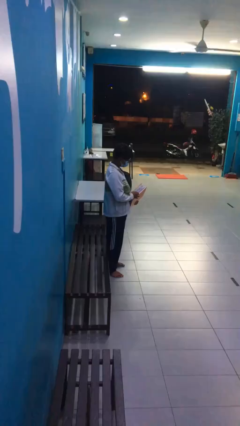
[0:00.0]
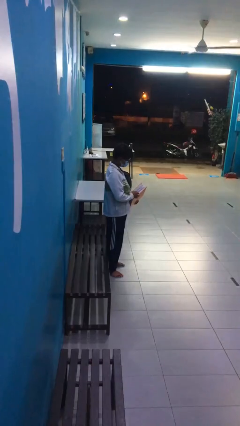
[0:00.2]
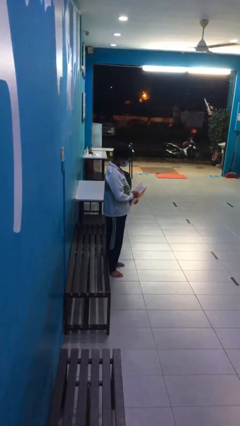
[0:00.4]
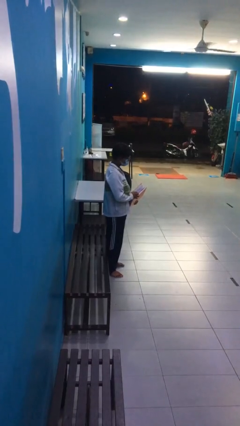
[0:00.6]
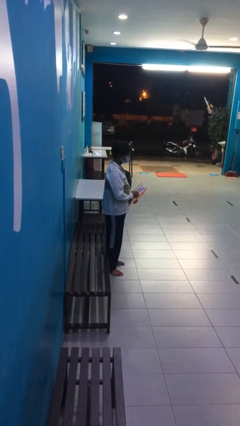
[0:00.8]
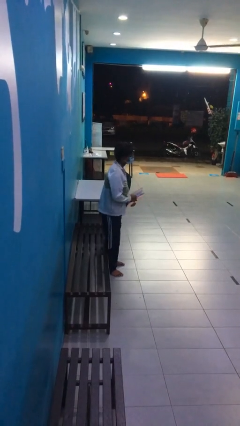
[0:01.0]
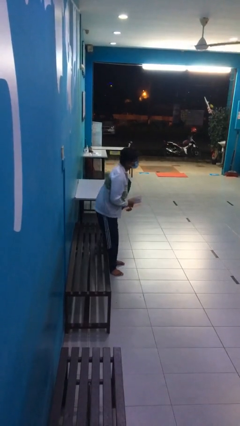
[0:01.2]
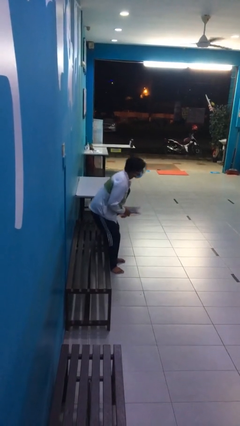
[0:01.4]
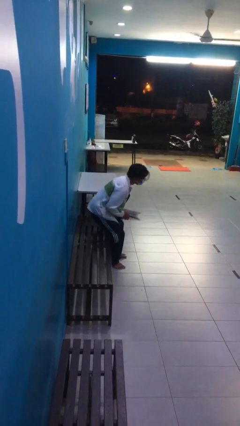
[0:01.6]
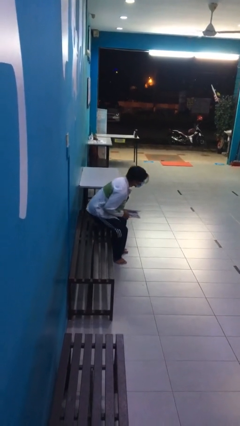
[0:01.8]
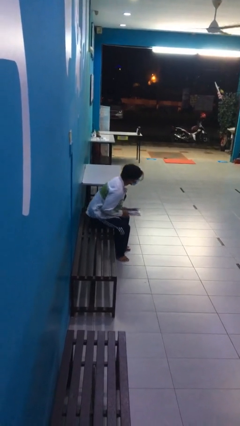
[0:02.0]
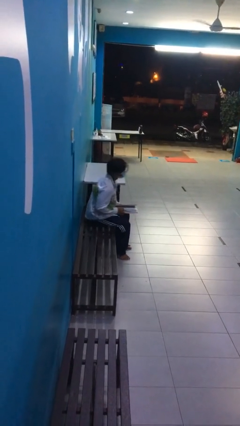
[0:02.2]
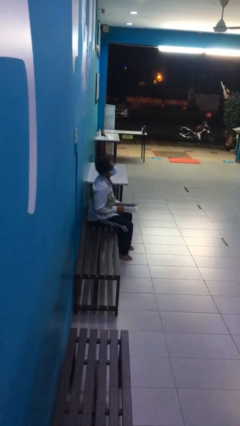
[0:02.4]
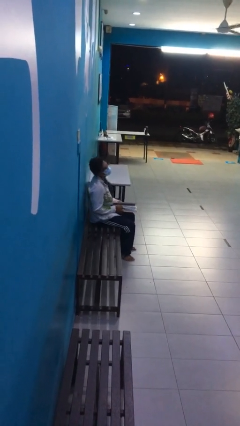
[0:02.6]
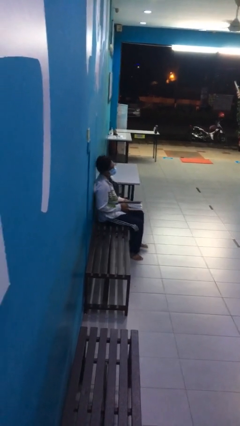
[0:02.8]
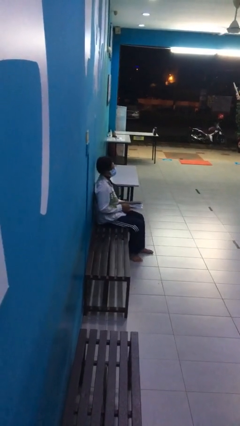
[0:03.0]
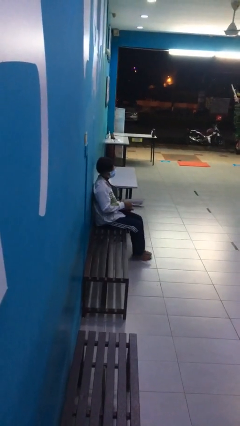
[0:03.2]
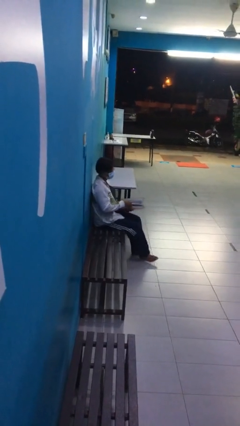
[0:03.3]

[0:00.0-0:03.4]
person sits down

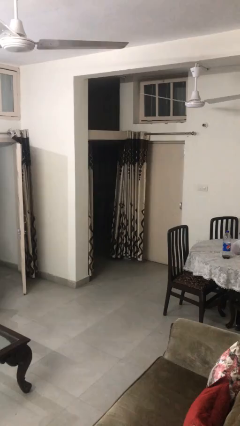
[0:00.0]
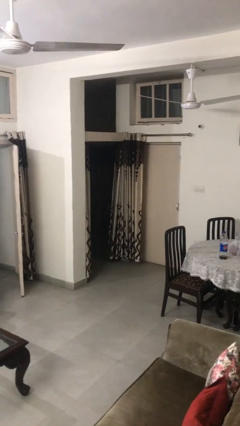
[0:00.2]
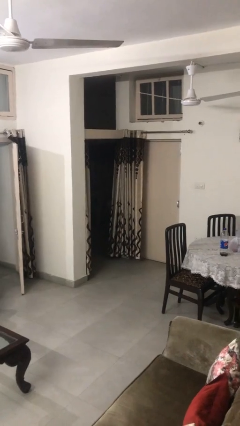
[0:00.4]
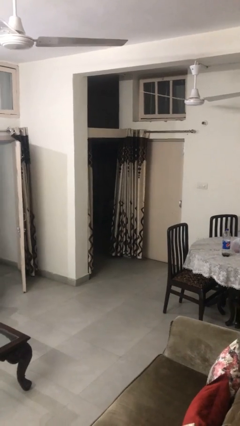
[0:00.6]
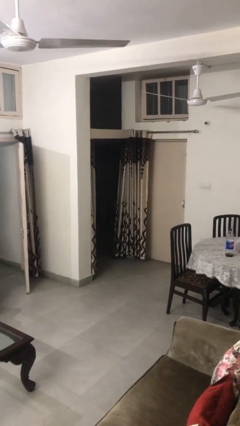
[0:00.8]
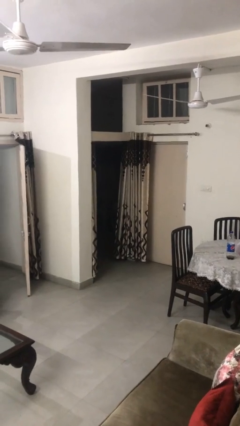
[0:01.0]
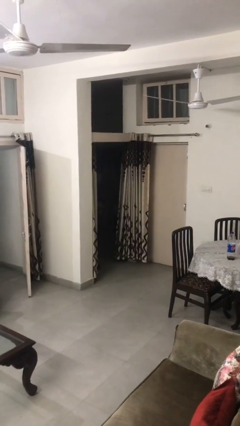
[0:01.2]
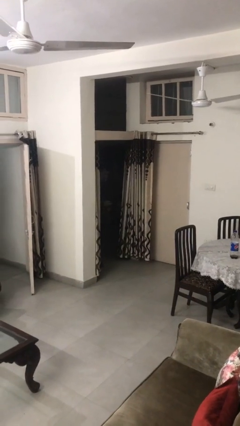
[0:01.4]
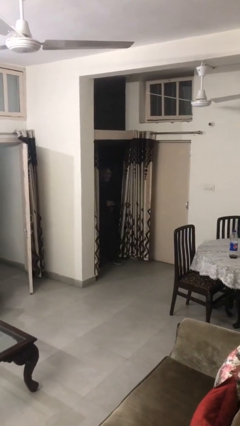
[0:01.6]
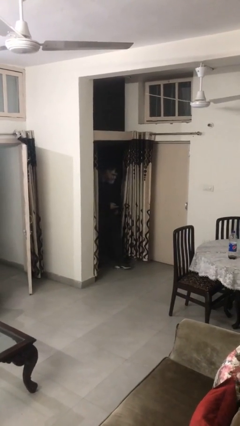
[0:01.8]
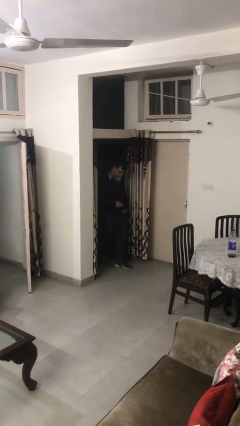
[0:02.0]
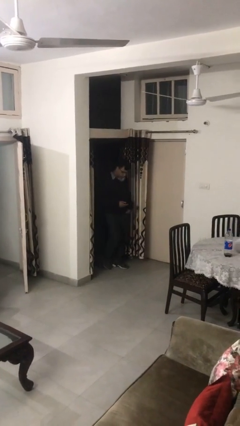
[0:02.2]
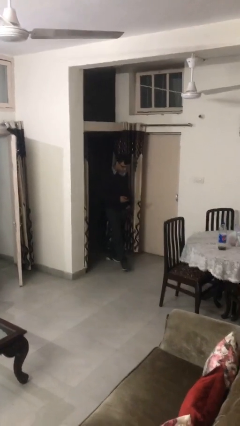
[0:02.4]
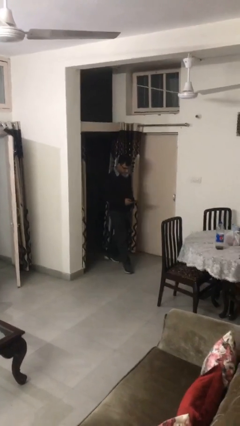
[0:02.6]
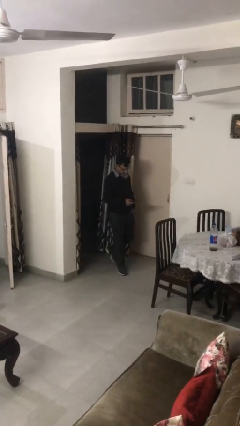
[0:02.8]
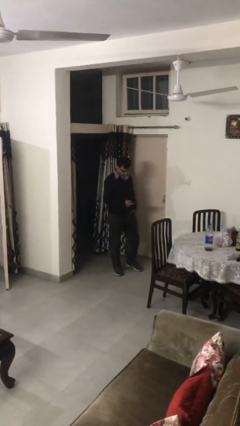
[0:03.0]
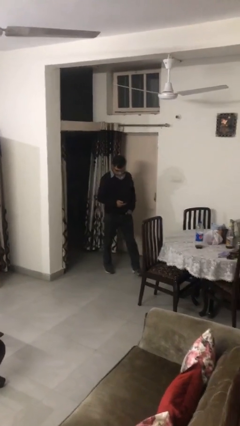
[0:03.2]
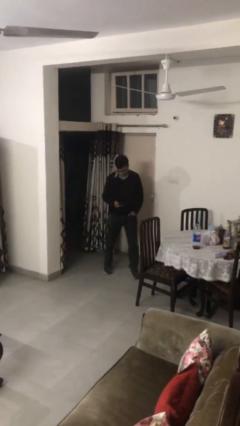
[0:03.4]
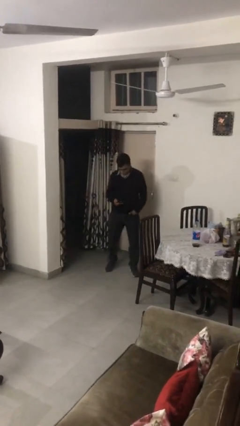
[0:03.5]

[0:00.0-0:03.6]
person enters scene through structure

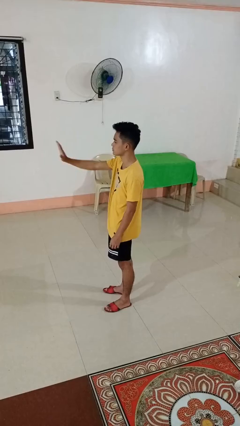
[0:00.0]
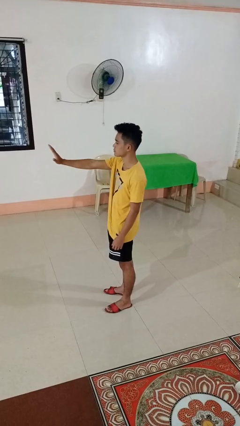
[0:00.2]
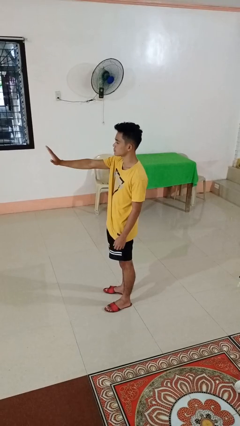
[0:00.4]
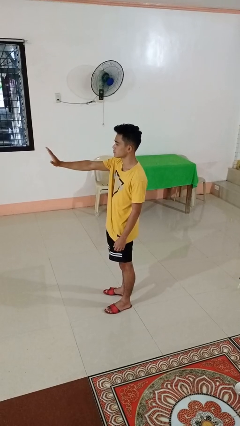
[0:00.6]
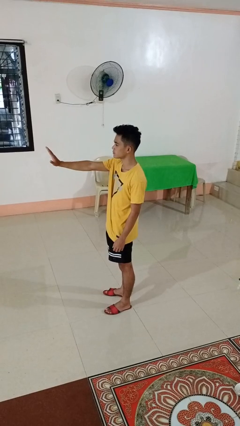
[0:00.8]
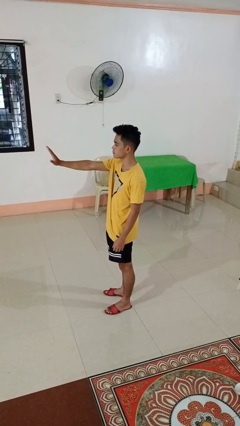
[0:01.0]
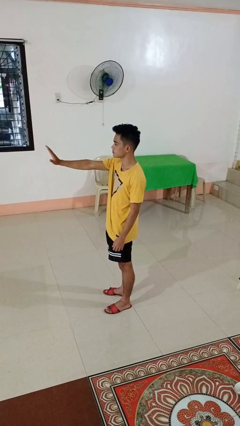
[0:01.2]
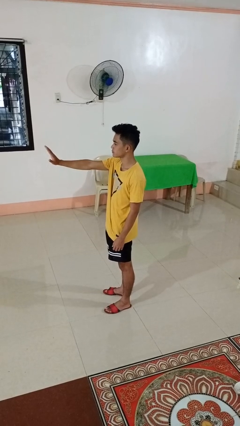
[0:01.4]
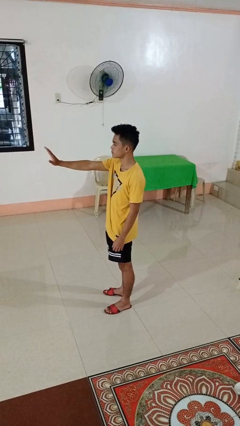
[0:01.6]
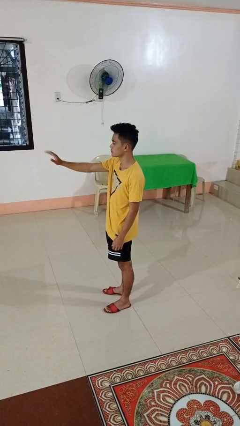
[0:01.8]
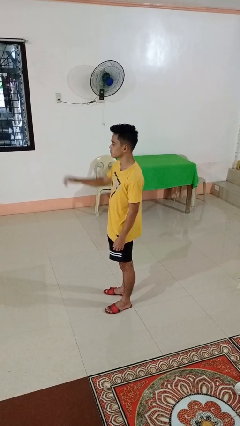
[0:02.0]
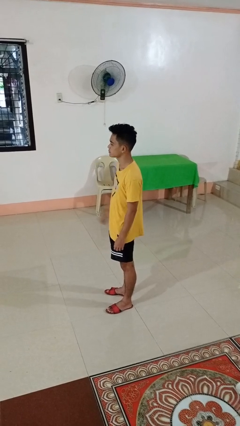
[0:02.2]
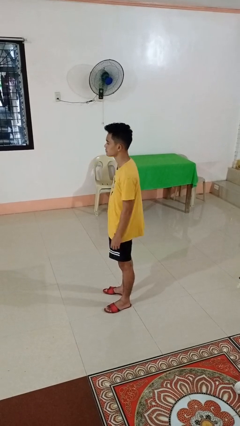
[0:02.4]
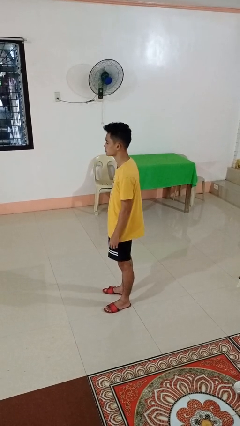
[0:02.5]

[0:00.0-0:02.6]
person gestures stop

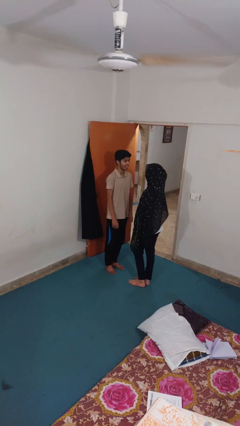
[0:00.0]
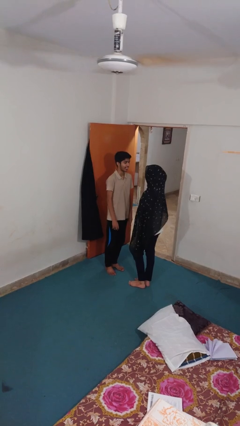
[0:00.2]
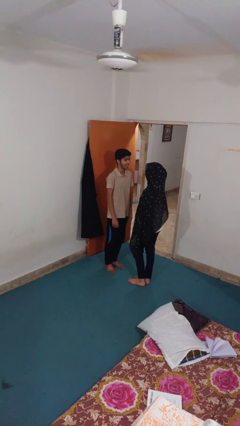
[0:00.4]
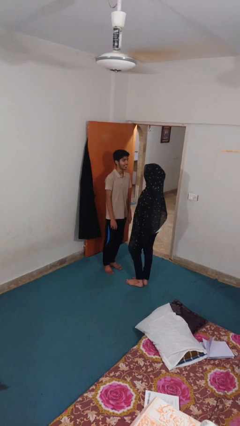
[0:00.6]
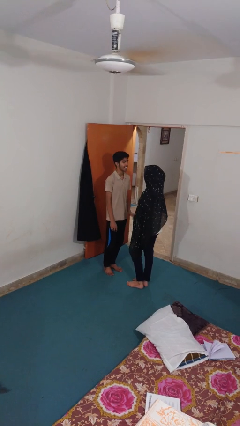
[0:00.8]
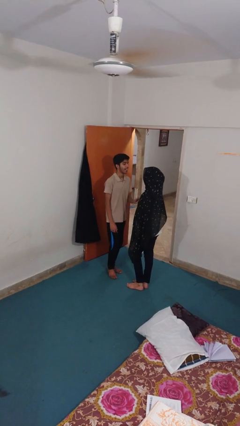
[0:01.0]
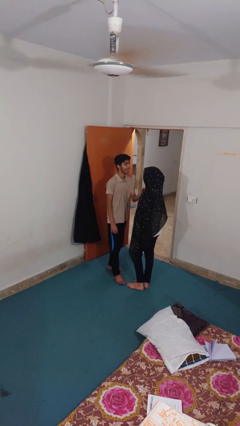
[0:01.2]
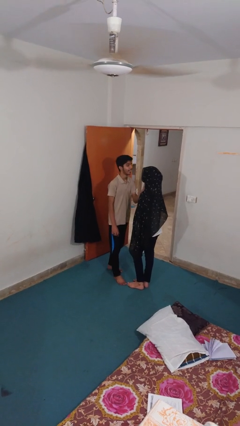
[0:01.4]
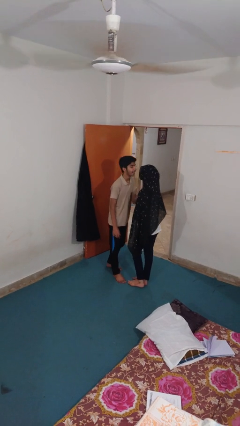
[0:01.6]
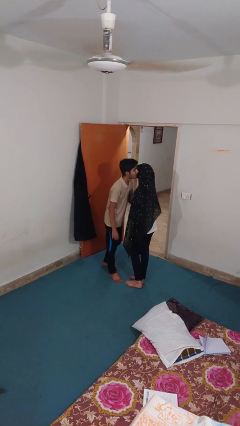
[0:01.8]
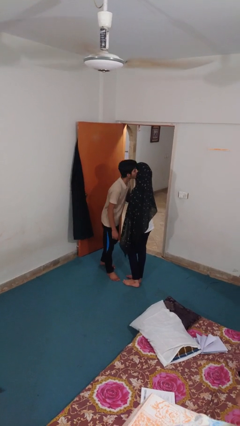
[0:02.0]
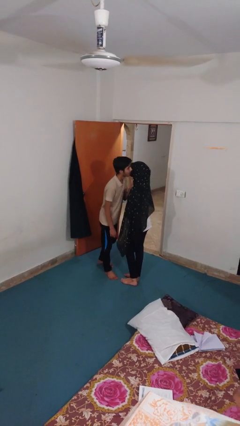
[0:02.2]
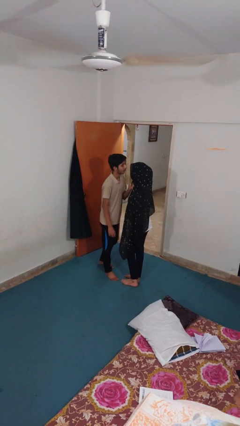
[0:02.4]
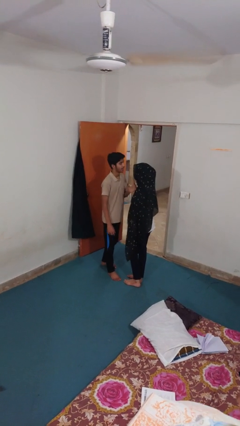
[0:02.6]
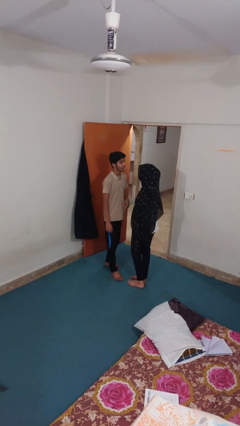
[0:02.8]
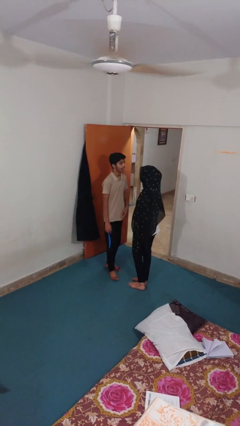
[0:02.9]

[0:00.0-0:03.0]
person kisses cheek of person

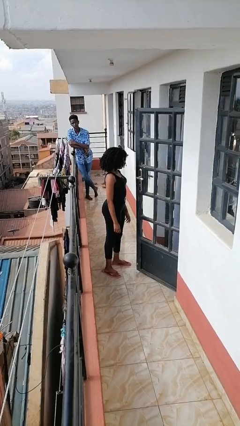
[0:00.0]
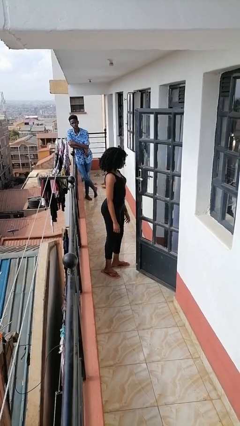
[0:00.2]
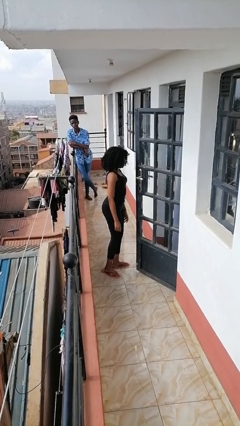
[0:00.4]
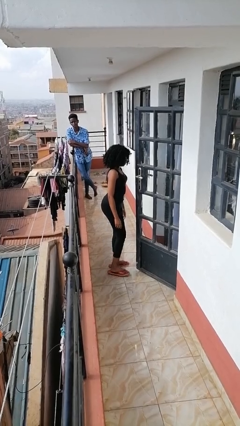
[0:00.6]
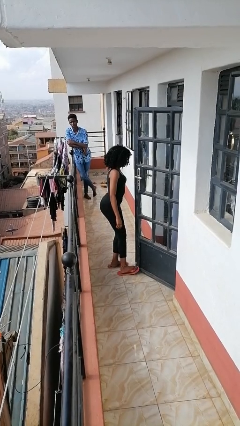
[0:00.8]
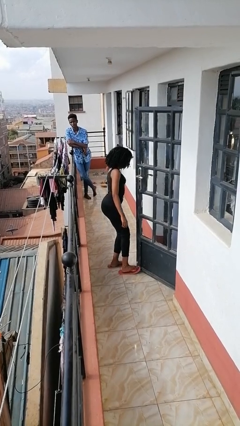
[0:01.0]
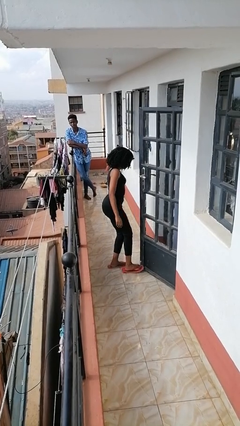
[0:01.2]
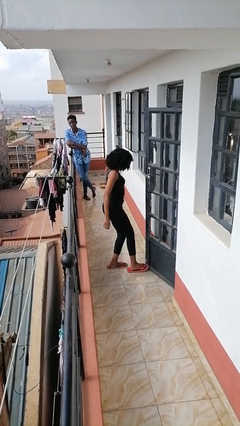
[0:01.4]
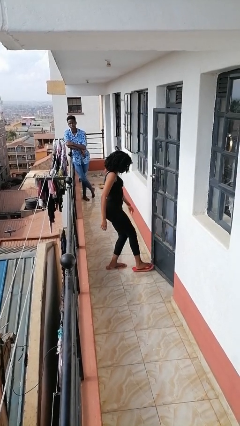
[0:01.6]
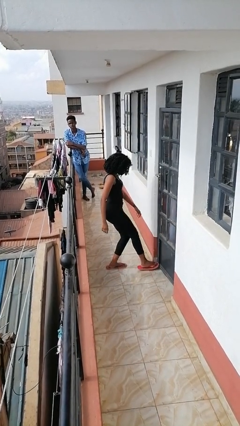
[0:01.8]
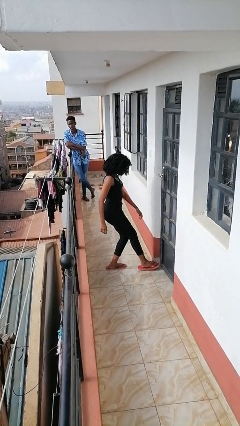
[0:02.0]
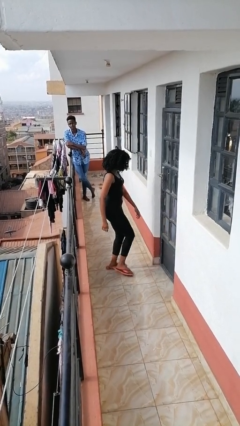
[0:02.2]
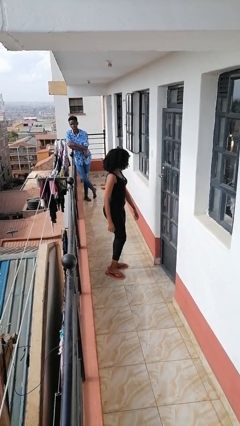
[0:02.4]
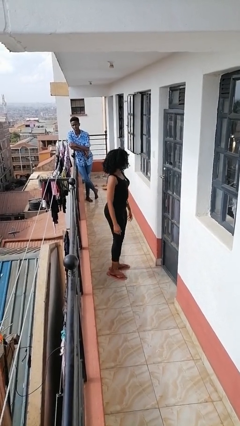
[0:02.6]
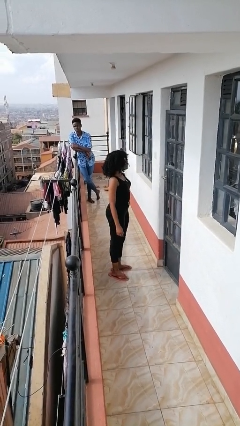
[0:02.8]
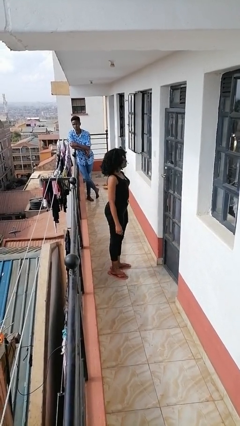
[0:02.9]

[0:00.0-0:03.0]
person closes door with foot

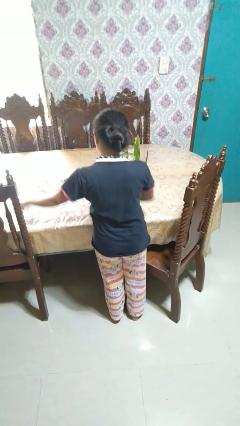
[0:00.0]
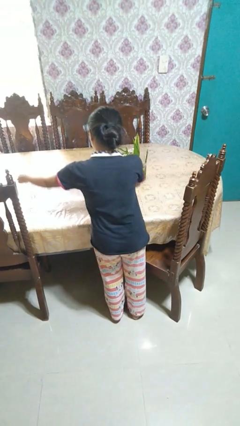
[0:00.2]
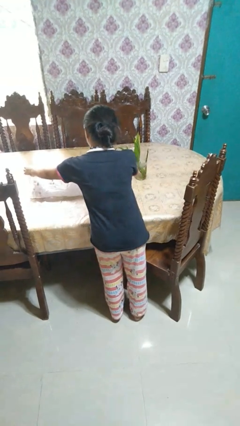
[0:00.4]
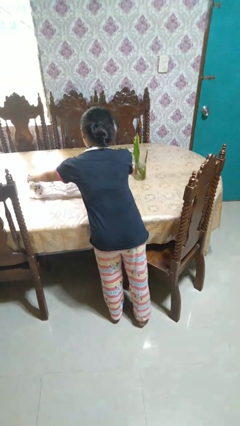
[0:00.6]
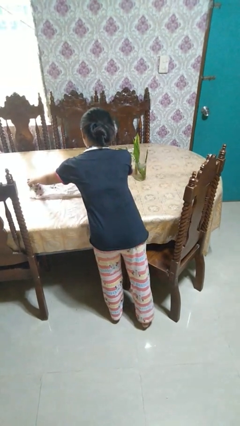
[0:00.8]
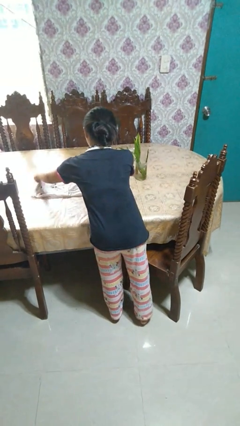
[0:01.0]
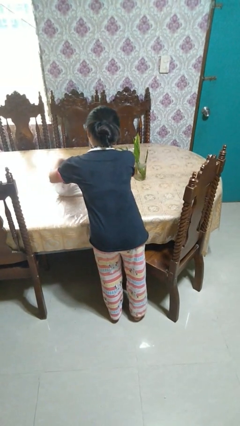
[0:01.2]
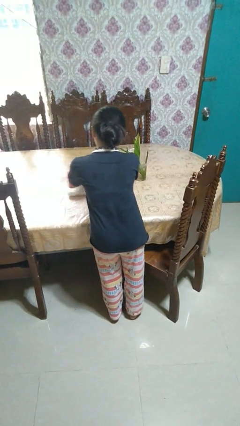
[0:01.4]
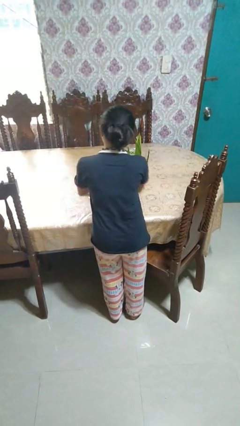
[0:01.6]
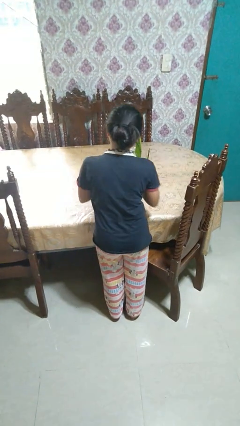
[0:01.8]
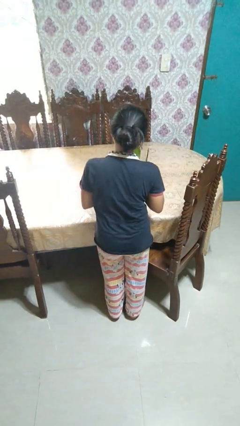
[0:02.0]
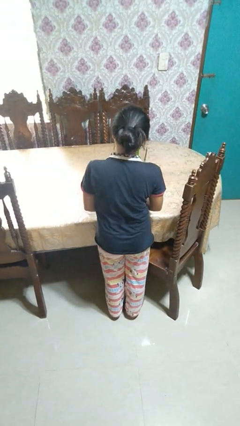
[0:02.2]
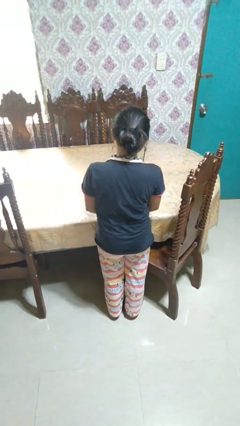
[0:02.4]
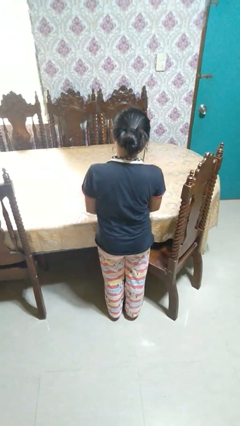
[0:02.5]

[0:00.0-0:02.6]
person folds tablecloth
